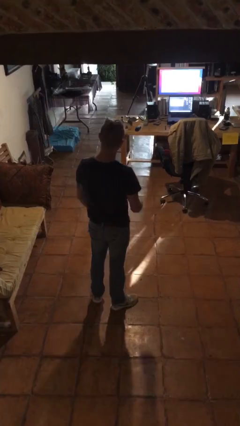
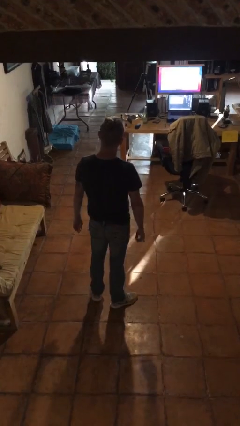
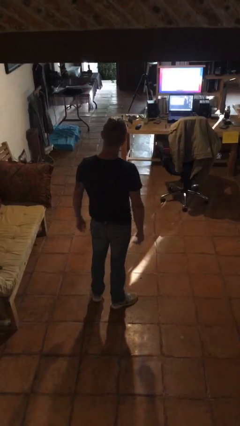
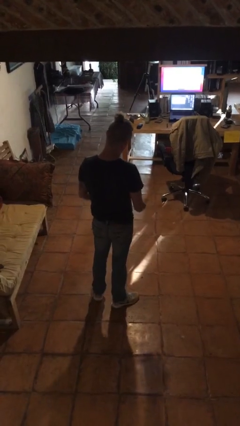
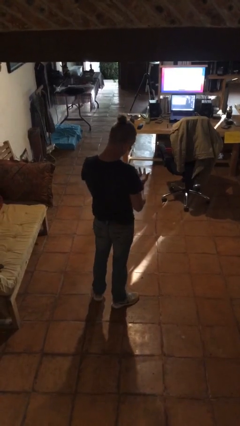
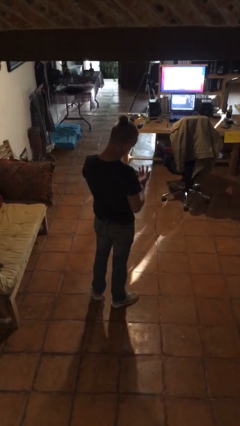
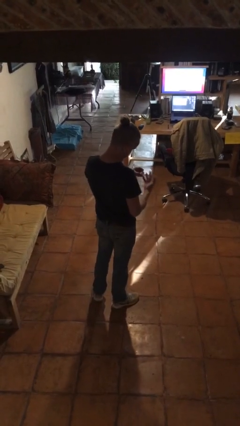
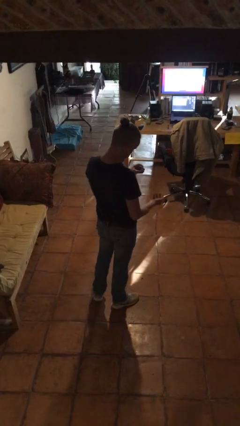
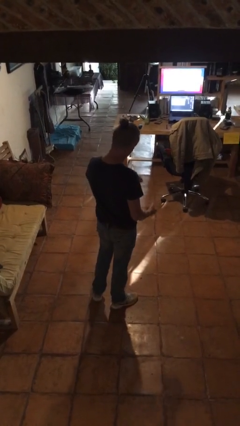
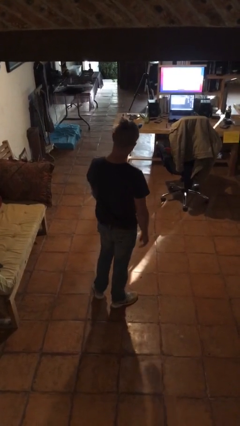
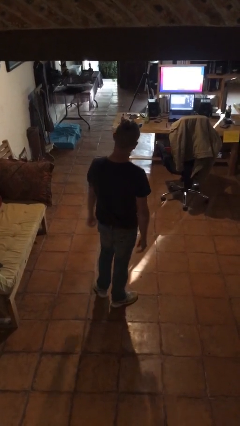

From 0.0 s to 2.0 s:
person takes off ring

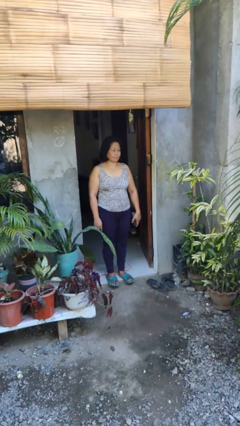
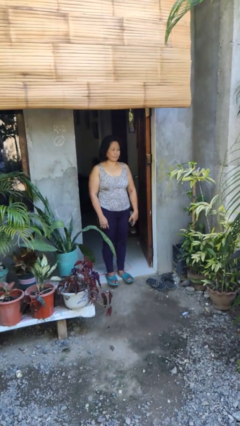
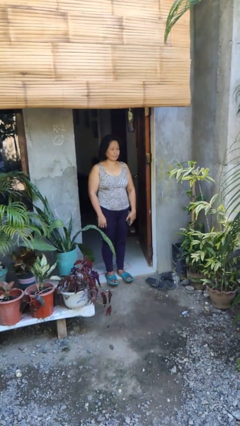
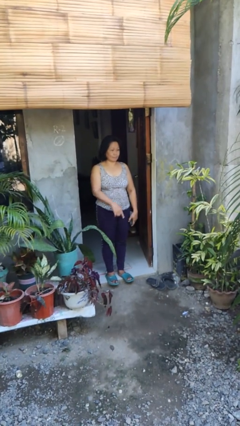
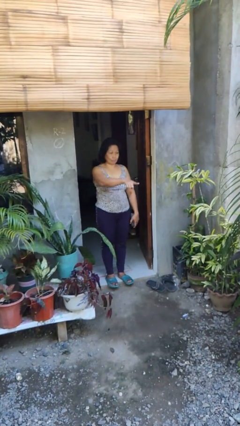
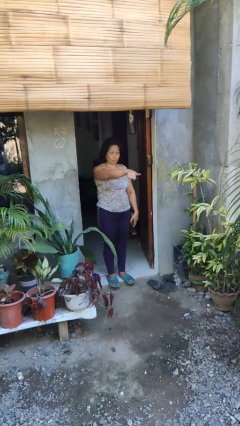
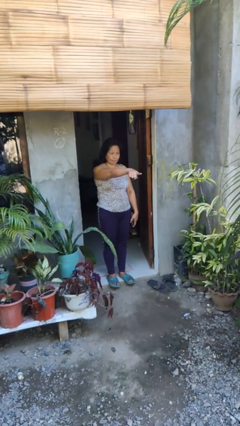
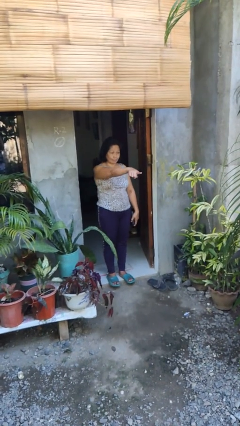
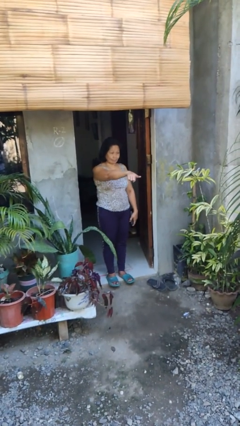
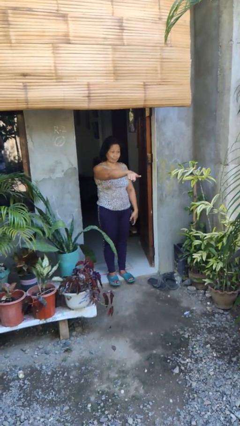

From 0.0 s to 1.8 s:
person points at person

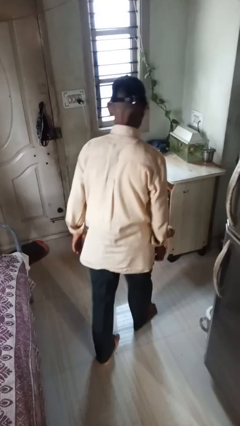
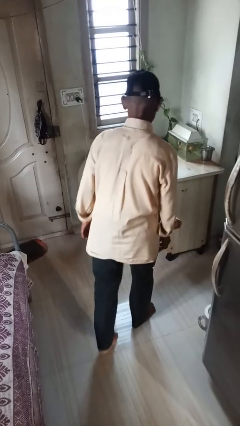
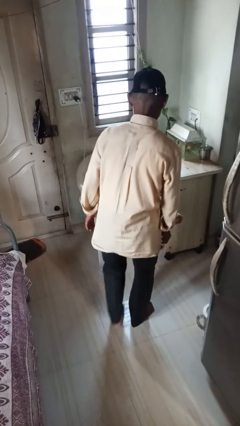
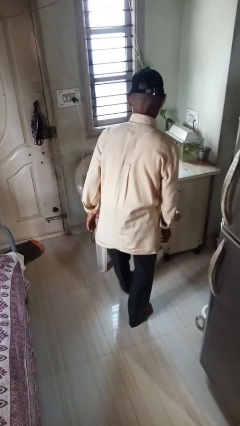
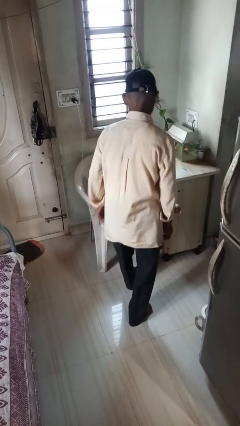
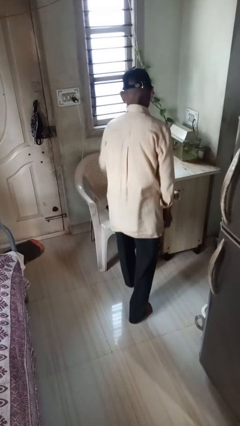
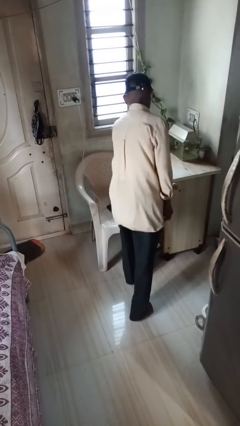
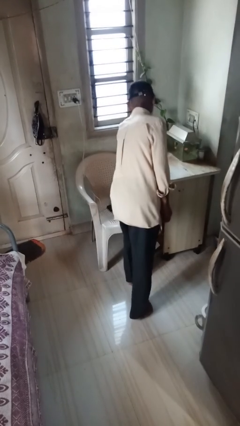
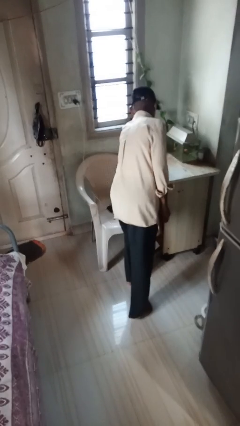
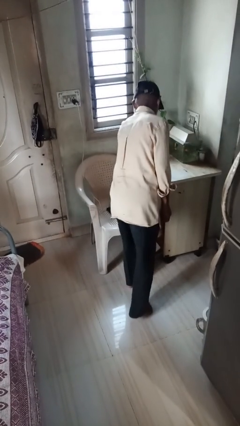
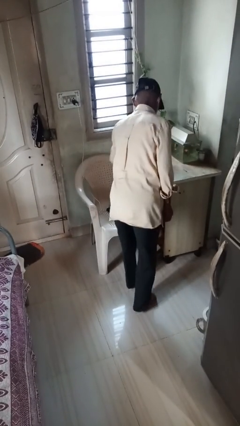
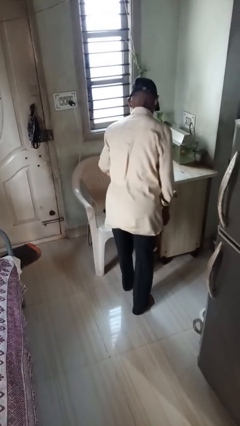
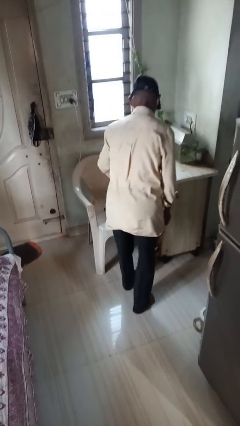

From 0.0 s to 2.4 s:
person picks up object from table

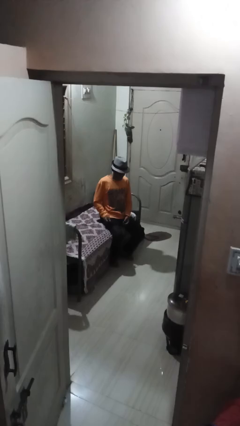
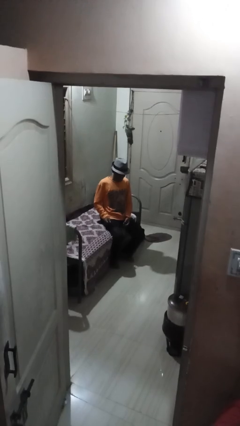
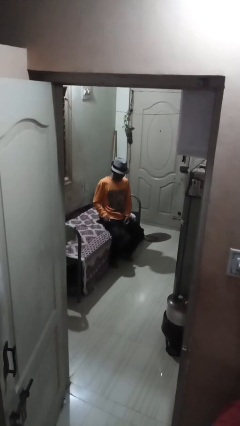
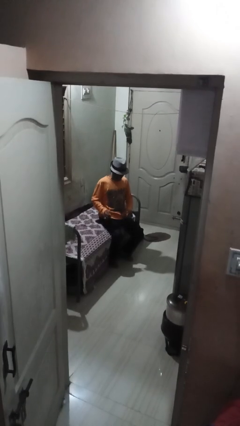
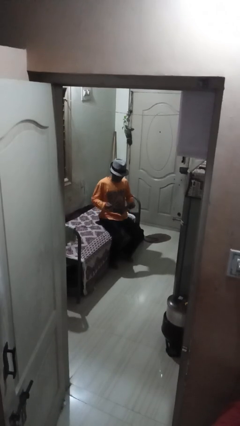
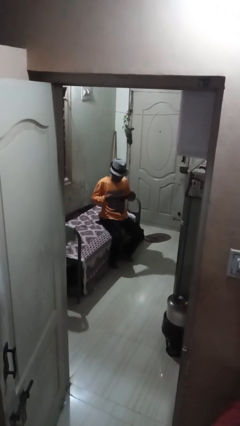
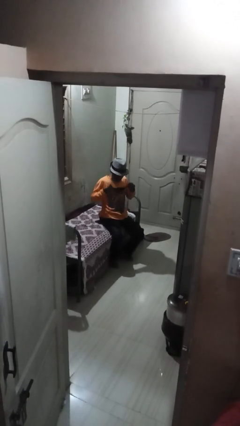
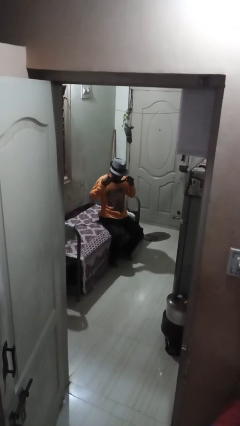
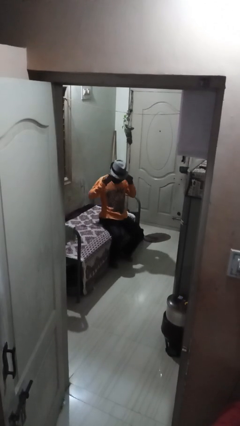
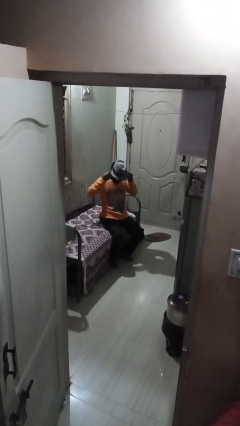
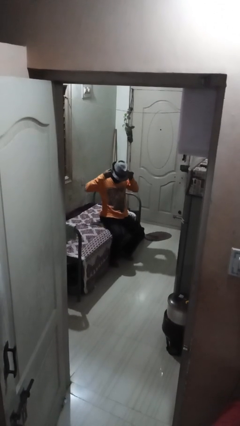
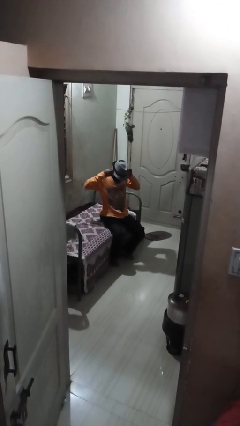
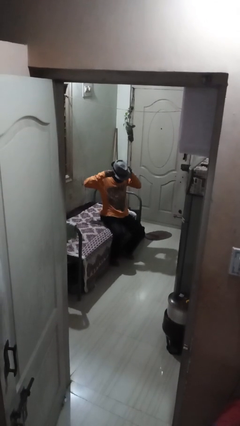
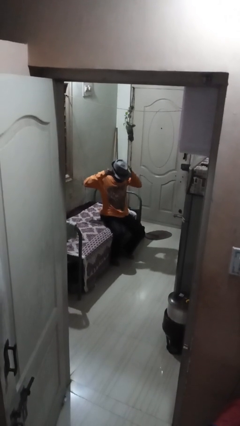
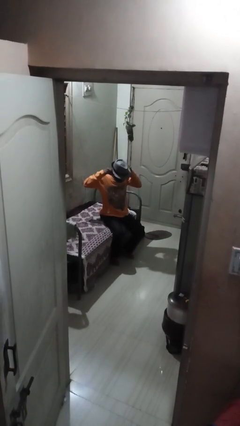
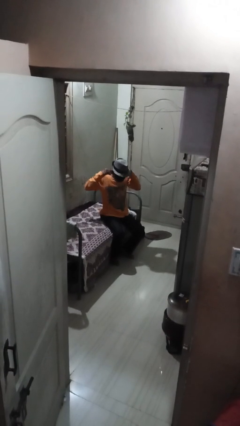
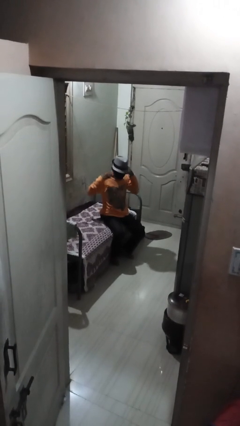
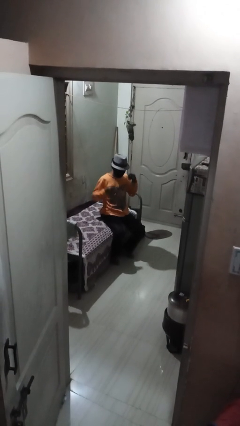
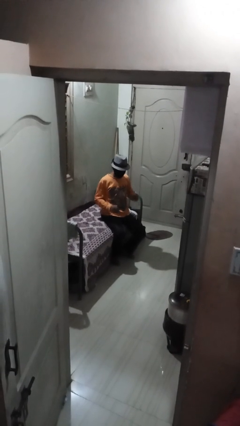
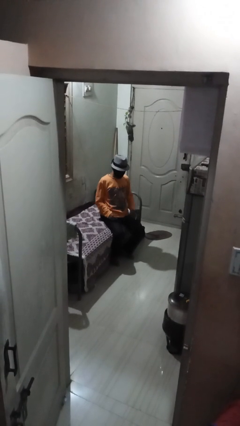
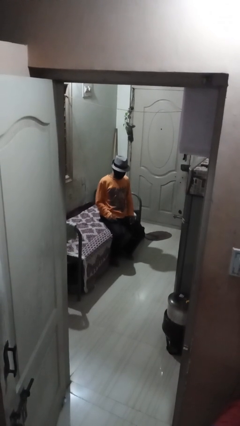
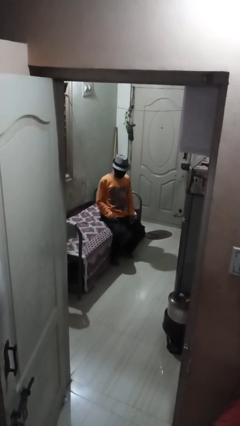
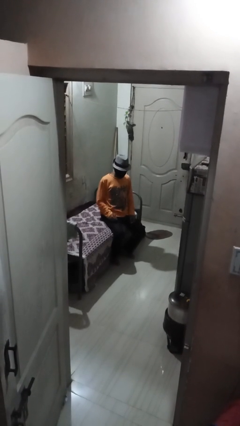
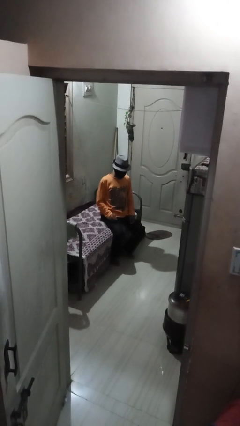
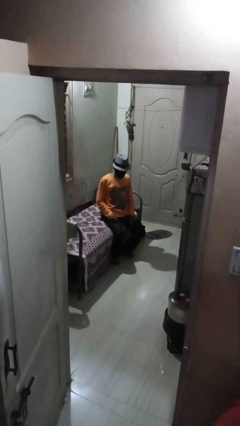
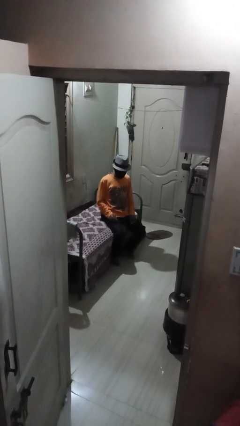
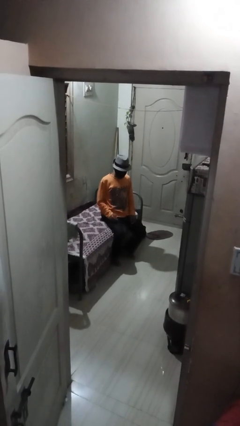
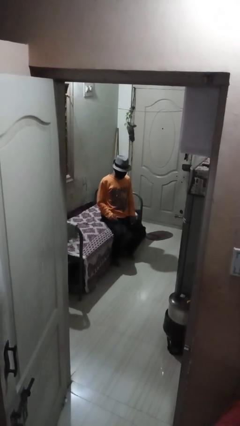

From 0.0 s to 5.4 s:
person puts on facemask

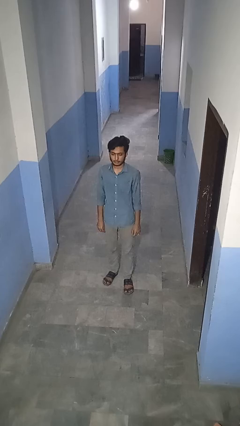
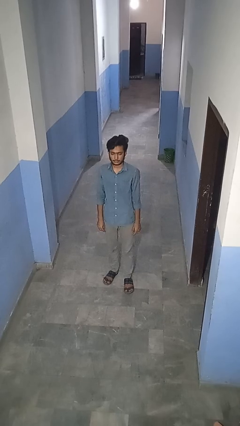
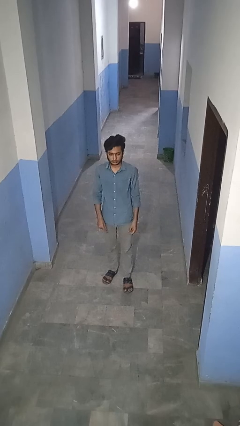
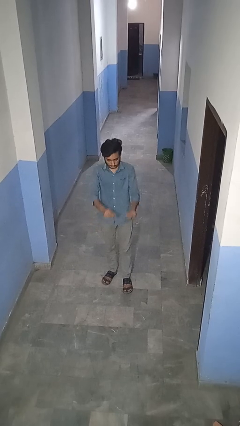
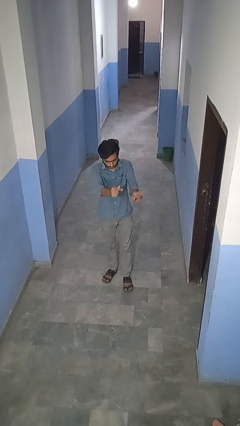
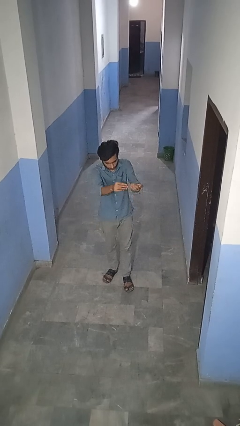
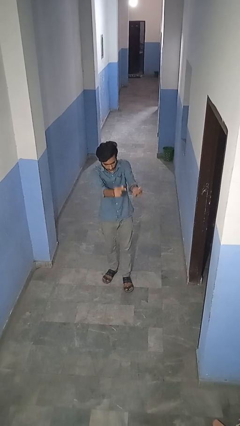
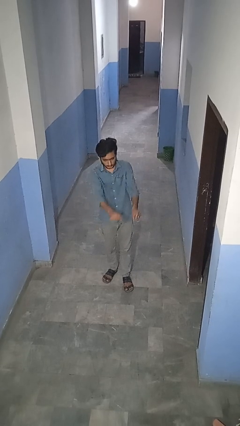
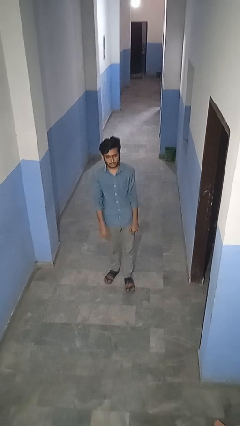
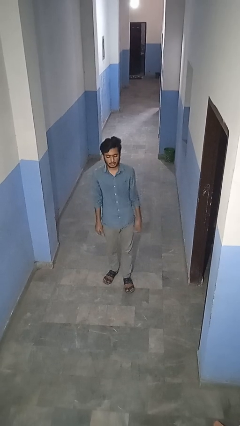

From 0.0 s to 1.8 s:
person snaps fingers

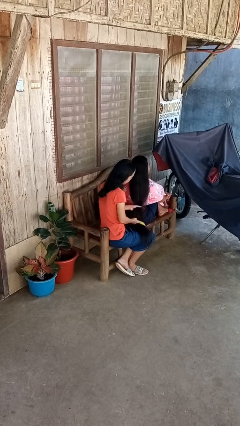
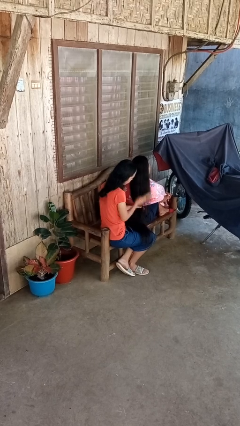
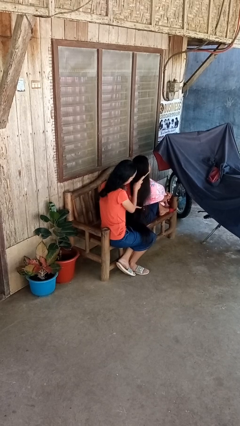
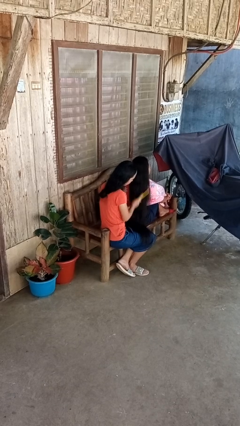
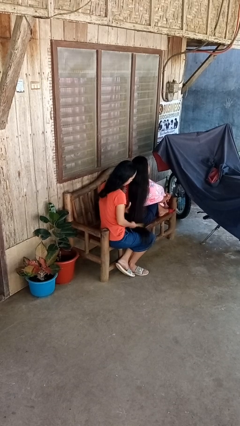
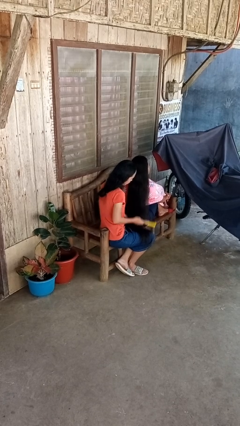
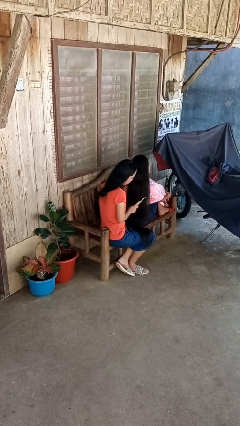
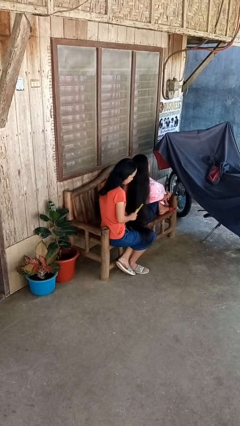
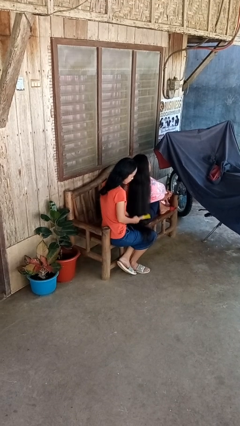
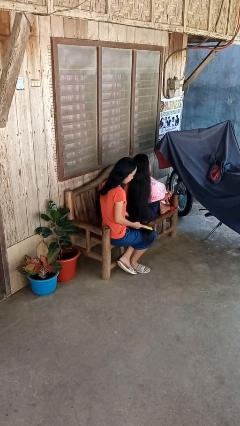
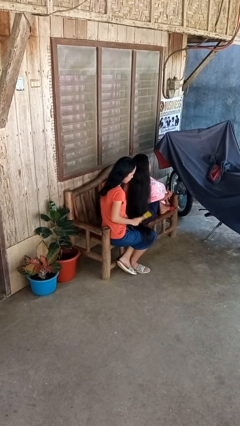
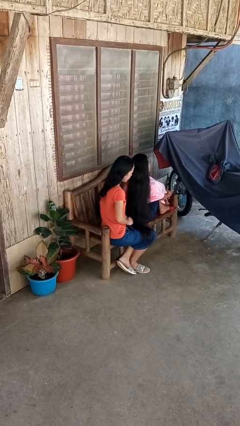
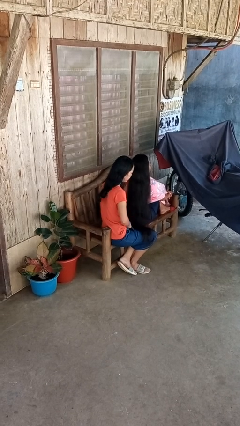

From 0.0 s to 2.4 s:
person brushes hair of person

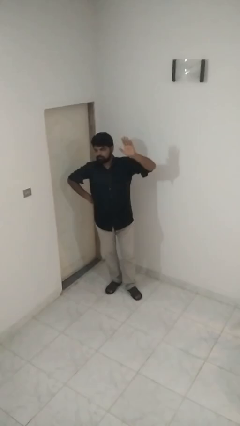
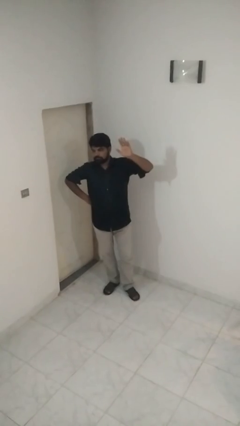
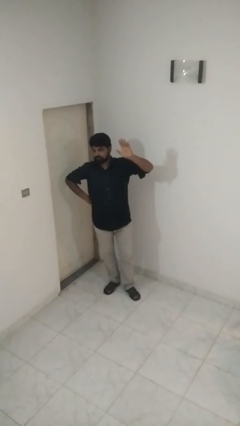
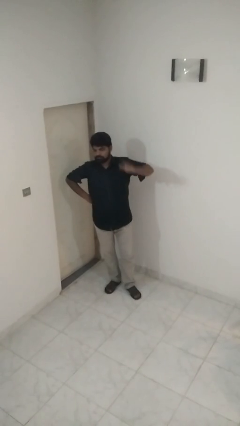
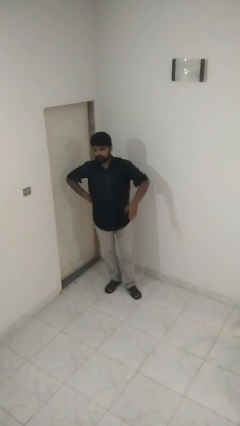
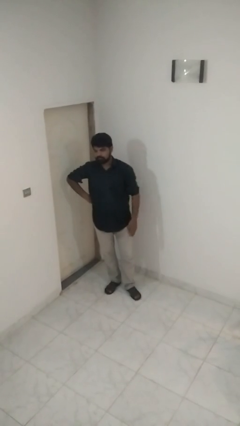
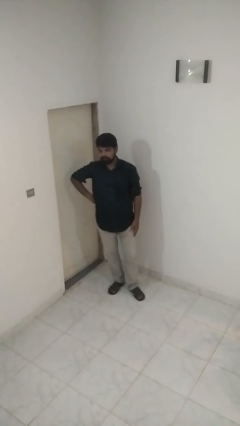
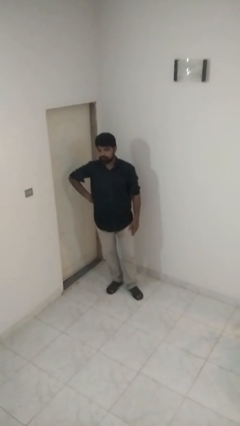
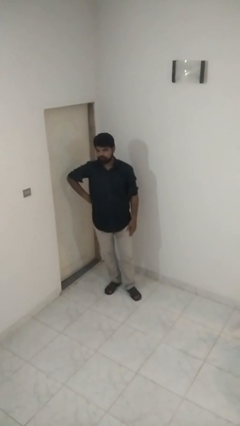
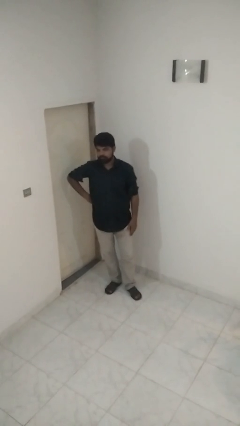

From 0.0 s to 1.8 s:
person gestures lower hand
